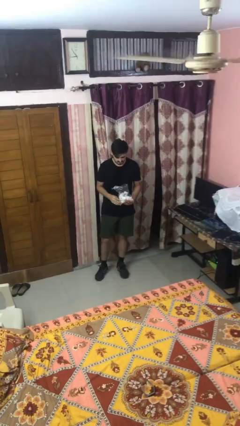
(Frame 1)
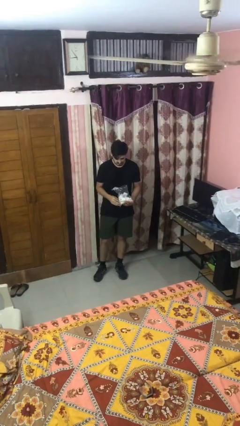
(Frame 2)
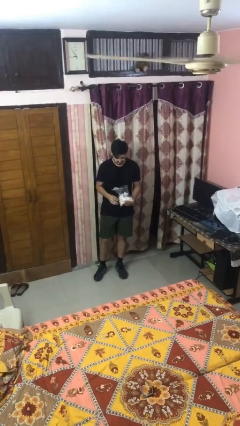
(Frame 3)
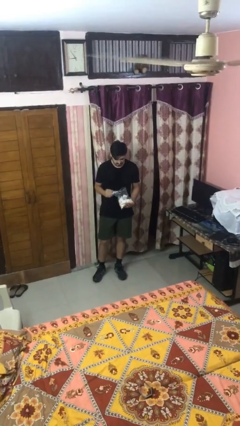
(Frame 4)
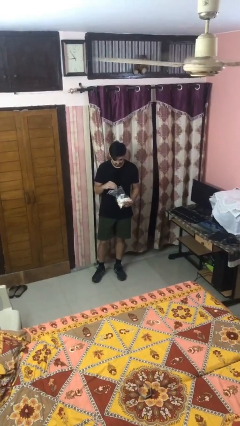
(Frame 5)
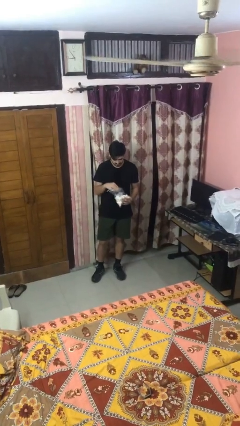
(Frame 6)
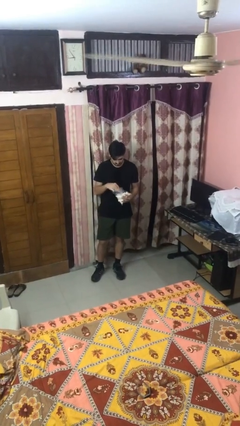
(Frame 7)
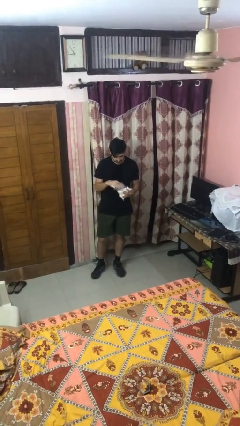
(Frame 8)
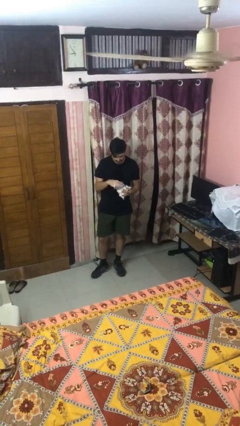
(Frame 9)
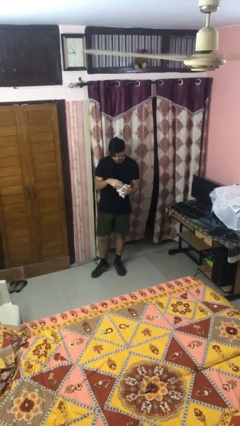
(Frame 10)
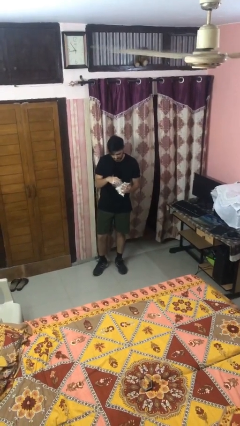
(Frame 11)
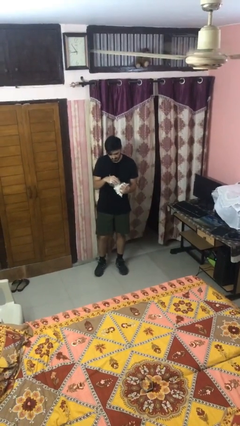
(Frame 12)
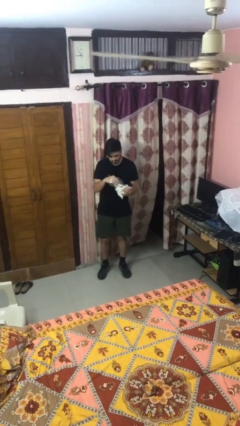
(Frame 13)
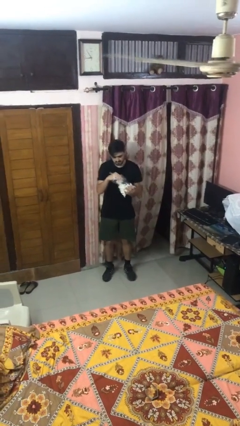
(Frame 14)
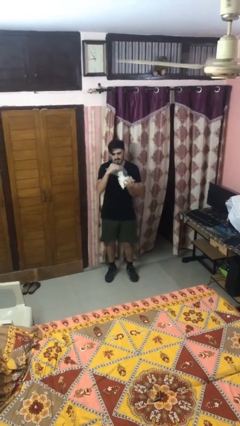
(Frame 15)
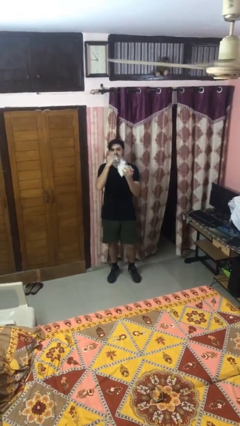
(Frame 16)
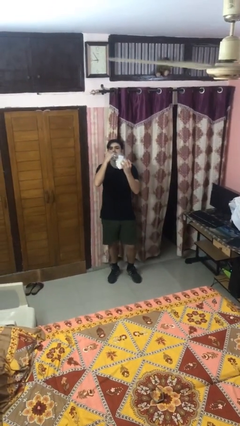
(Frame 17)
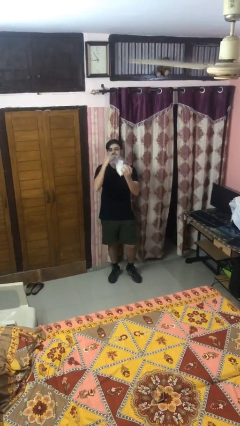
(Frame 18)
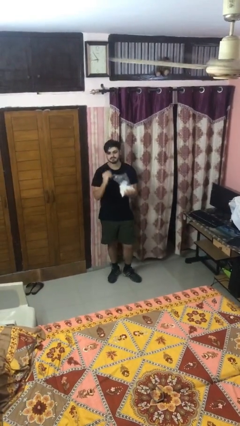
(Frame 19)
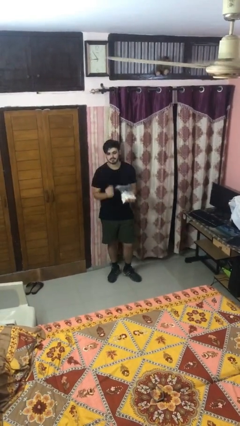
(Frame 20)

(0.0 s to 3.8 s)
person eats snack from bag

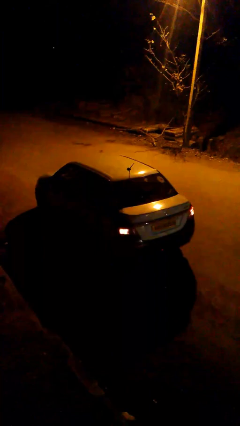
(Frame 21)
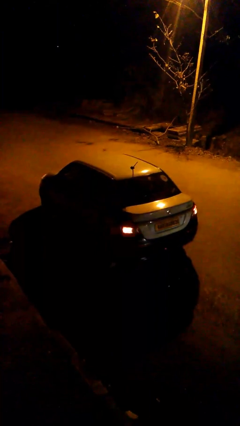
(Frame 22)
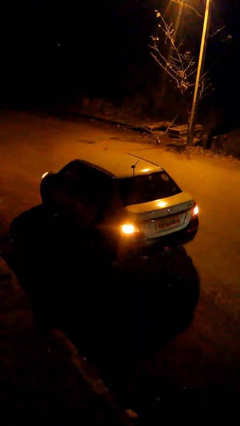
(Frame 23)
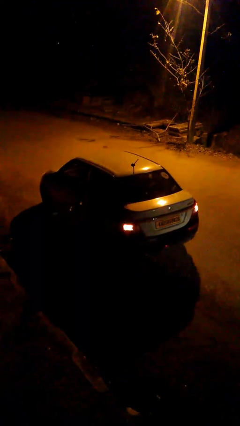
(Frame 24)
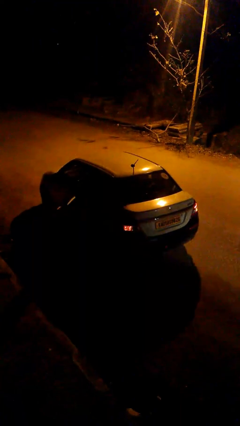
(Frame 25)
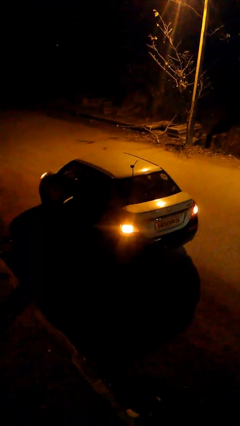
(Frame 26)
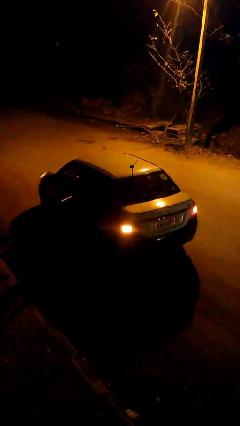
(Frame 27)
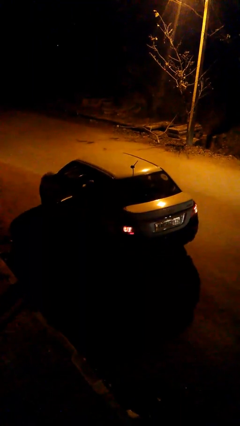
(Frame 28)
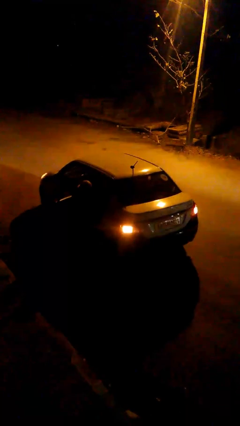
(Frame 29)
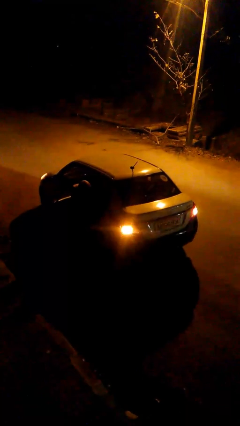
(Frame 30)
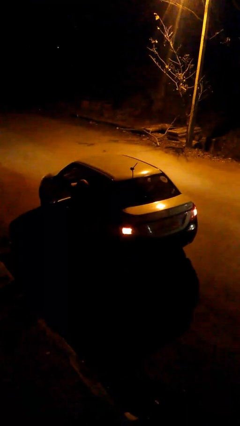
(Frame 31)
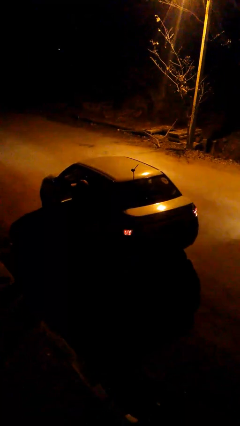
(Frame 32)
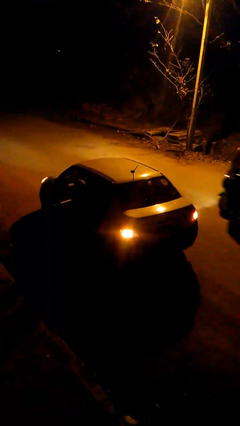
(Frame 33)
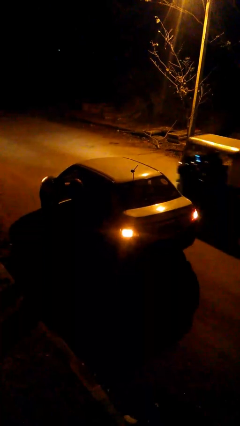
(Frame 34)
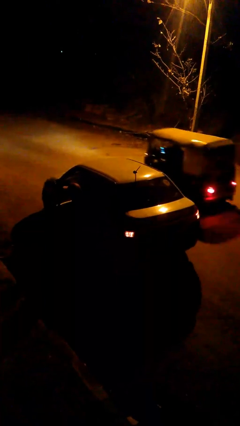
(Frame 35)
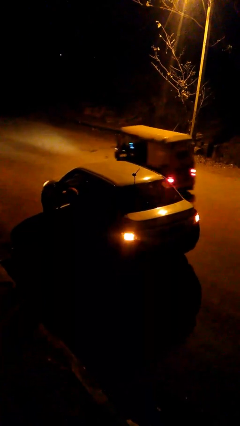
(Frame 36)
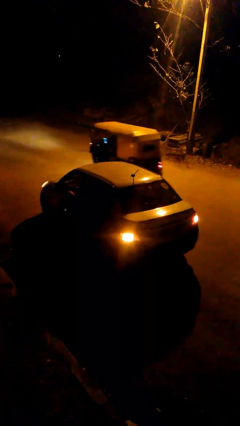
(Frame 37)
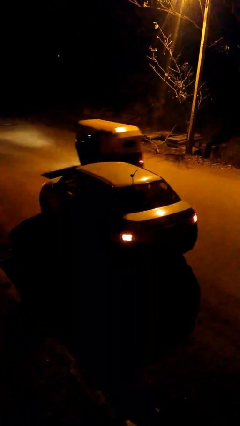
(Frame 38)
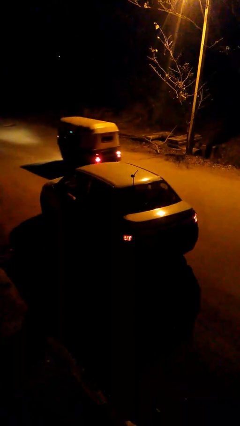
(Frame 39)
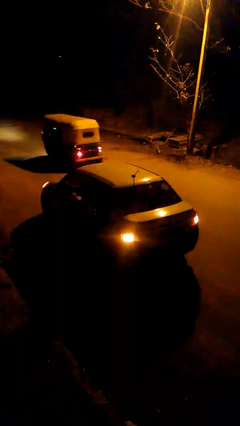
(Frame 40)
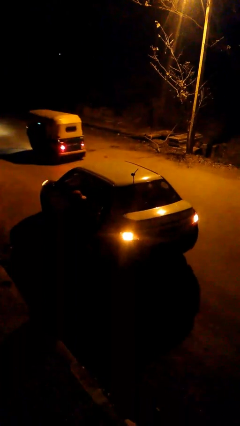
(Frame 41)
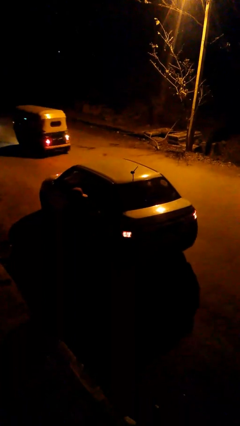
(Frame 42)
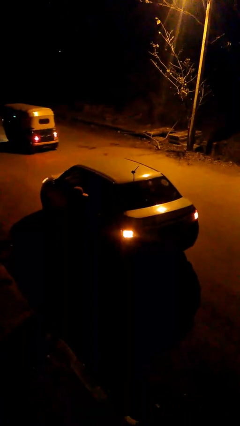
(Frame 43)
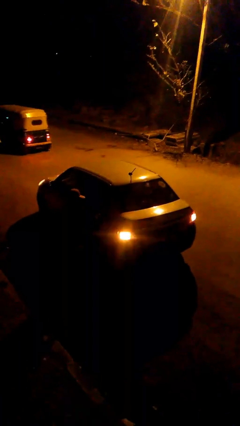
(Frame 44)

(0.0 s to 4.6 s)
car drops off person

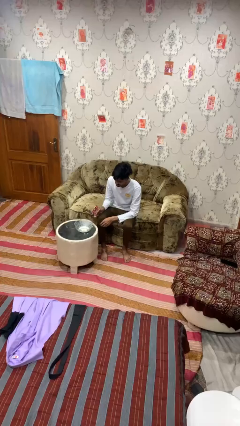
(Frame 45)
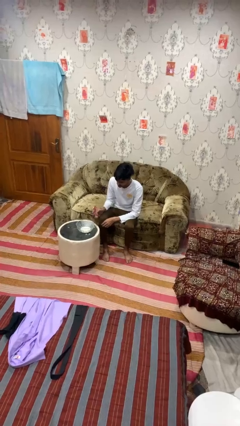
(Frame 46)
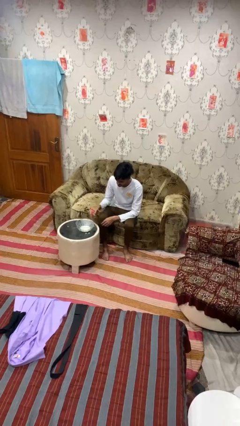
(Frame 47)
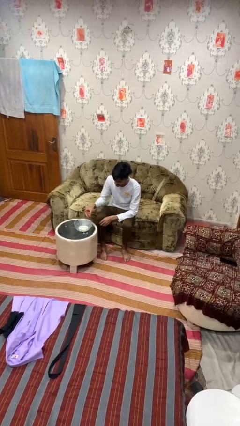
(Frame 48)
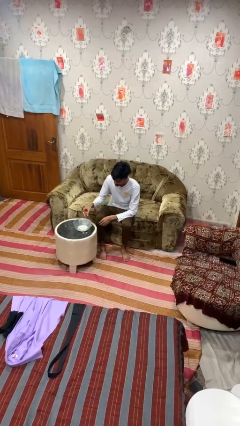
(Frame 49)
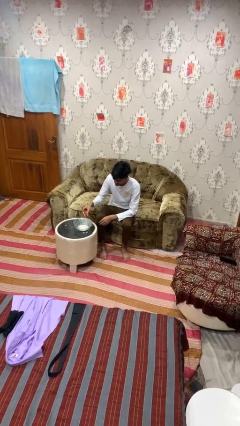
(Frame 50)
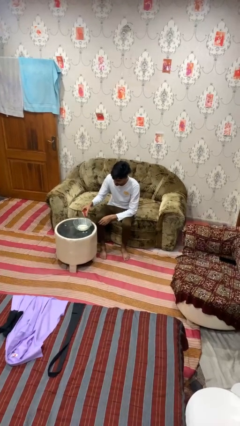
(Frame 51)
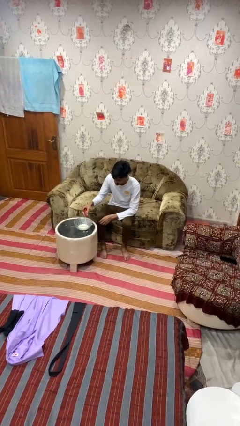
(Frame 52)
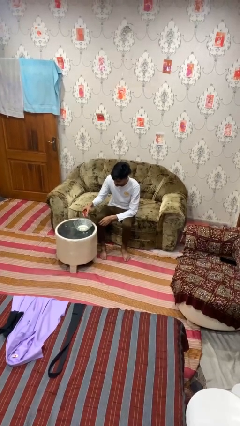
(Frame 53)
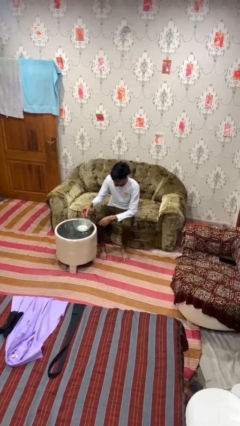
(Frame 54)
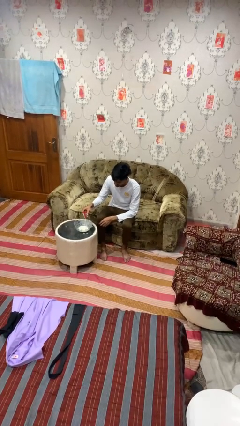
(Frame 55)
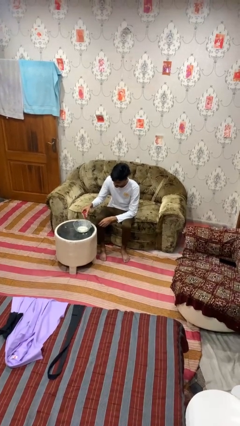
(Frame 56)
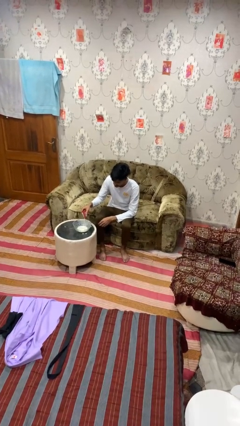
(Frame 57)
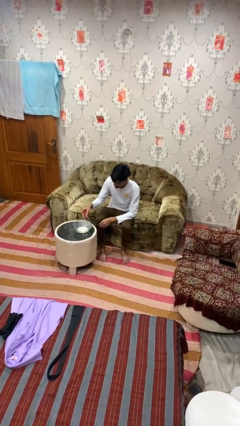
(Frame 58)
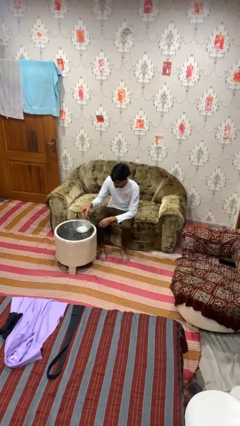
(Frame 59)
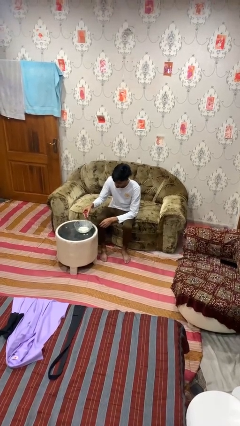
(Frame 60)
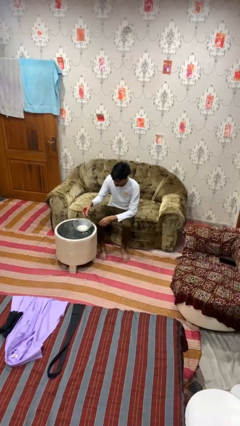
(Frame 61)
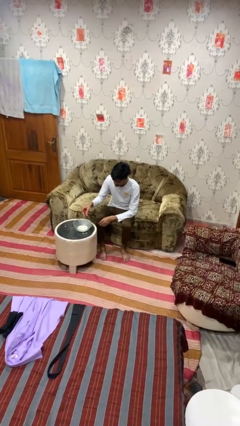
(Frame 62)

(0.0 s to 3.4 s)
person pours into bowl

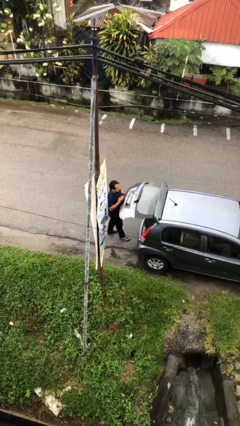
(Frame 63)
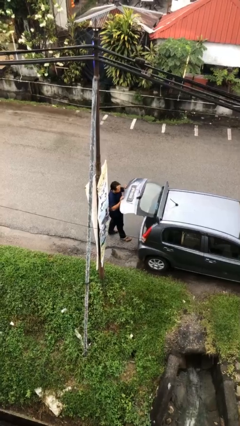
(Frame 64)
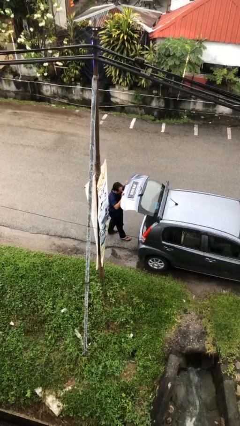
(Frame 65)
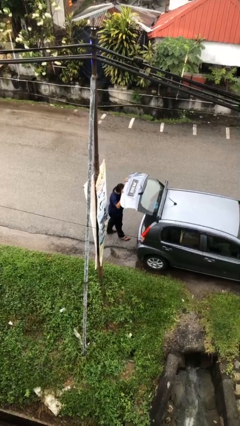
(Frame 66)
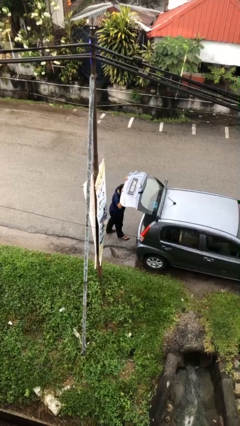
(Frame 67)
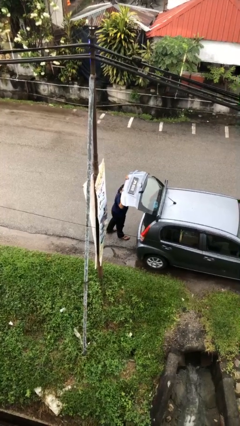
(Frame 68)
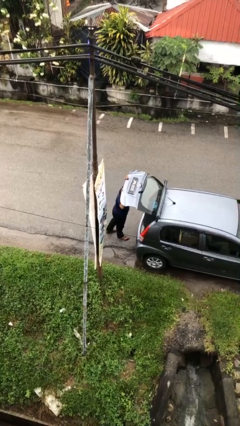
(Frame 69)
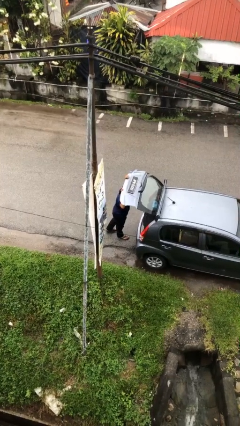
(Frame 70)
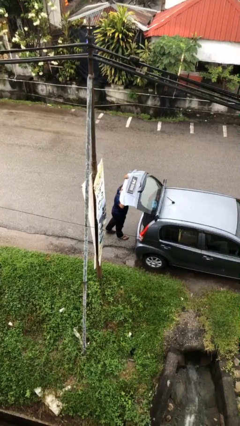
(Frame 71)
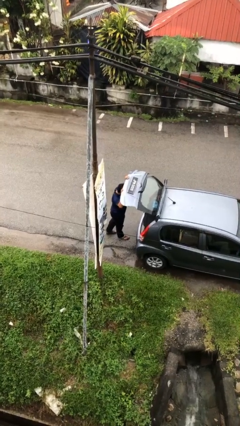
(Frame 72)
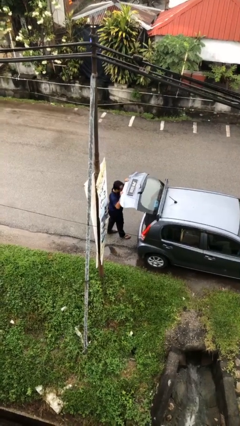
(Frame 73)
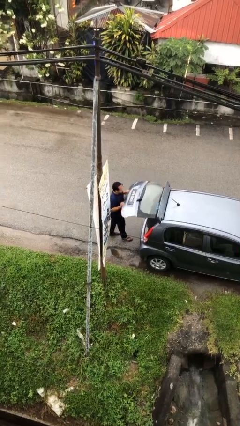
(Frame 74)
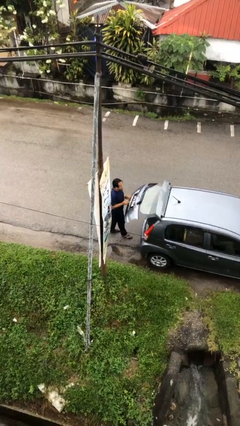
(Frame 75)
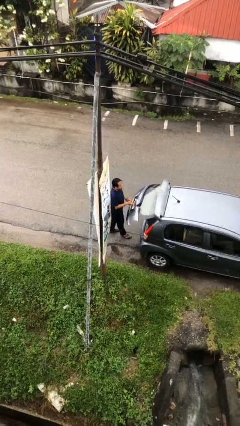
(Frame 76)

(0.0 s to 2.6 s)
person opens car trunk

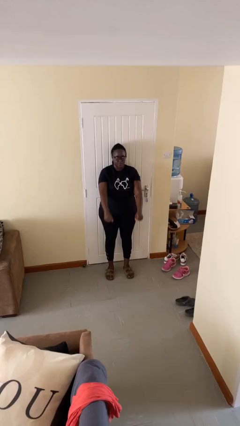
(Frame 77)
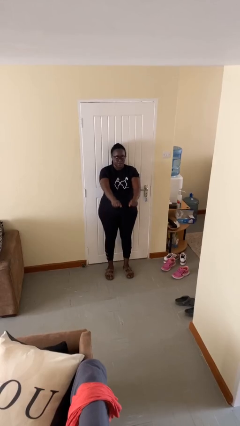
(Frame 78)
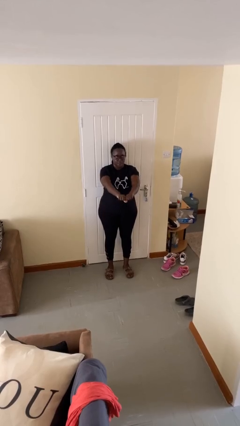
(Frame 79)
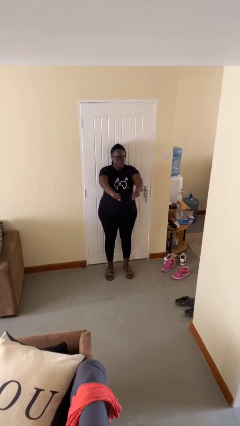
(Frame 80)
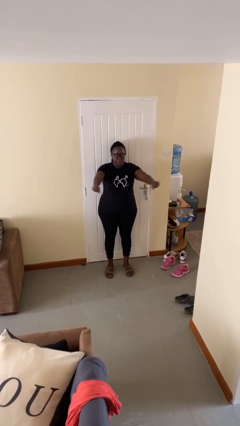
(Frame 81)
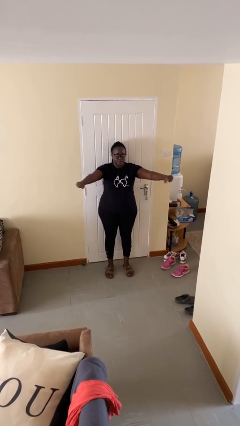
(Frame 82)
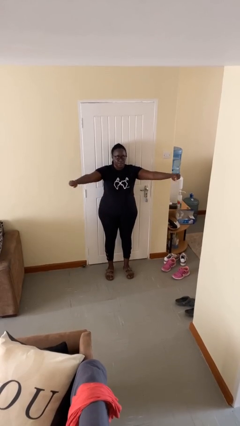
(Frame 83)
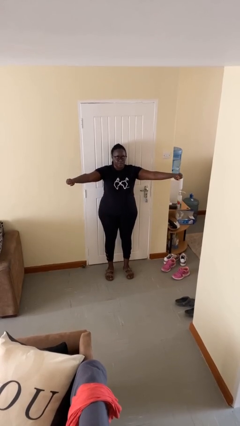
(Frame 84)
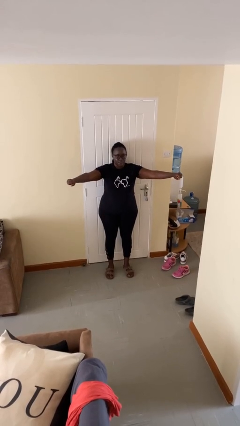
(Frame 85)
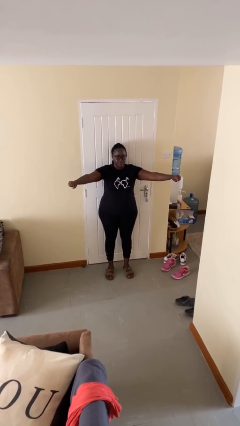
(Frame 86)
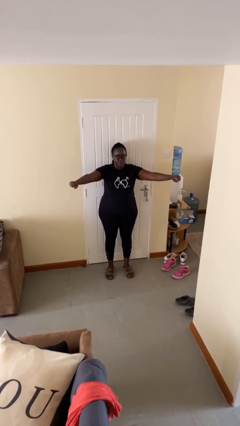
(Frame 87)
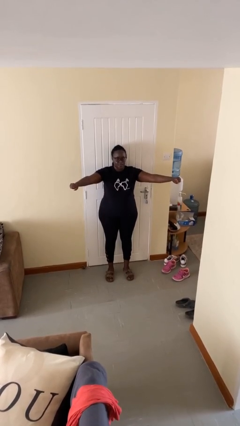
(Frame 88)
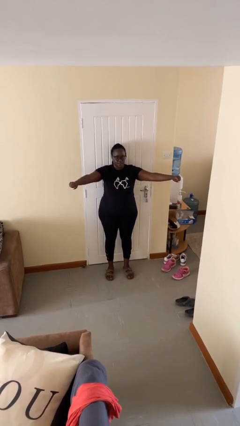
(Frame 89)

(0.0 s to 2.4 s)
person gestures zoom in

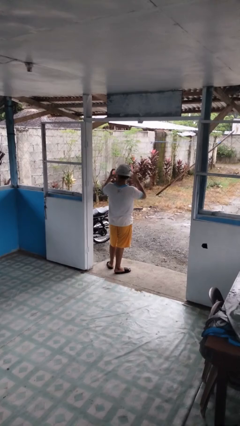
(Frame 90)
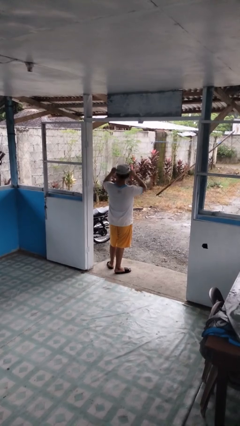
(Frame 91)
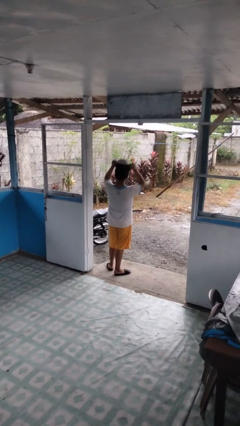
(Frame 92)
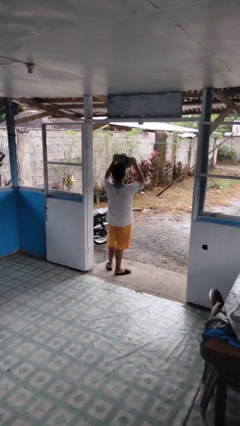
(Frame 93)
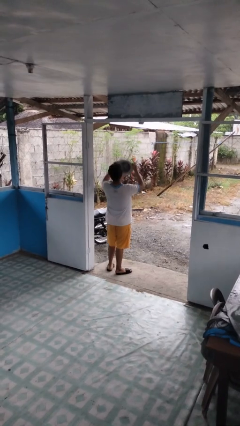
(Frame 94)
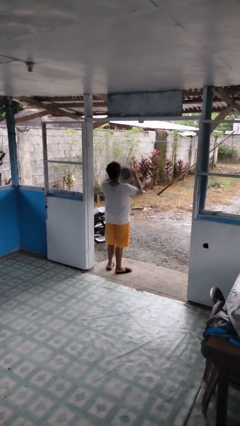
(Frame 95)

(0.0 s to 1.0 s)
person takes off hat
